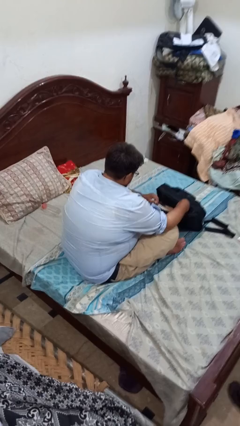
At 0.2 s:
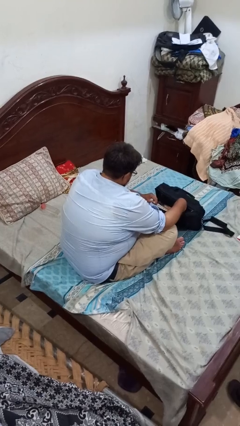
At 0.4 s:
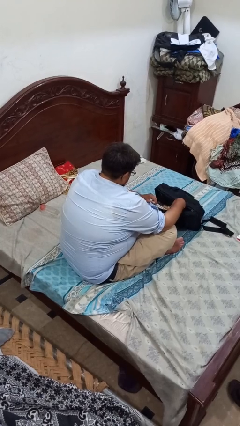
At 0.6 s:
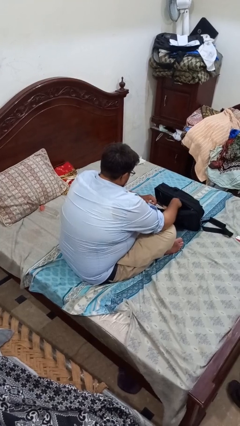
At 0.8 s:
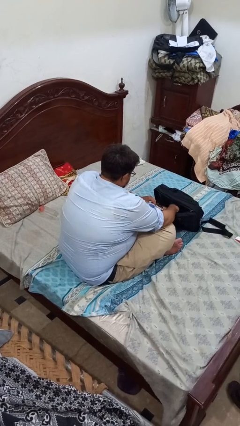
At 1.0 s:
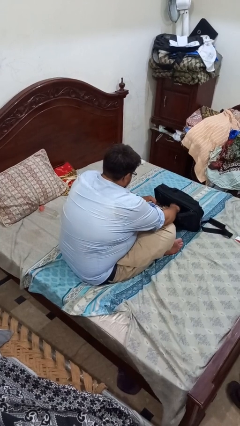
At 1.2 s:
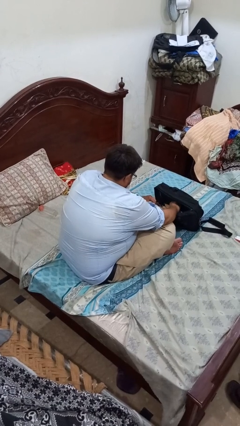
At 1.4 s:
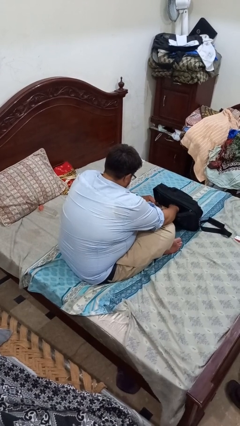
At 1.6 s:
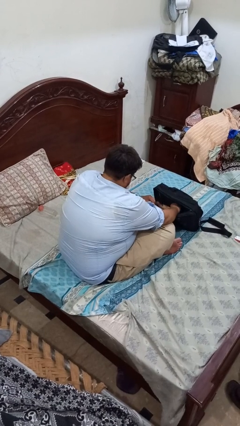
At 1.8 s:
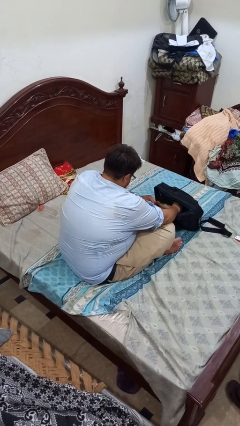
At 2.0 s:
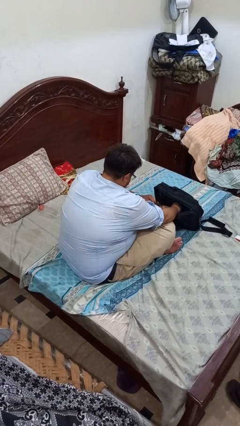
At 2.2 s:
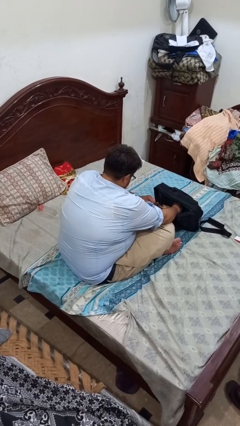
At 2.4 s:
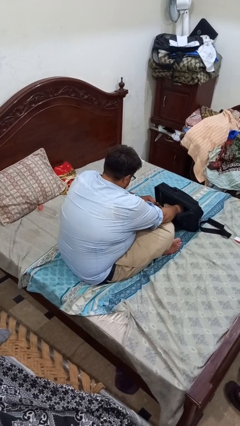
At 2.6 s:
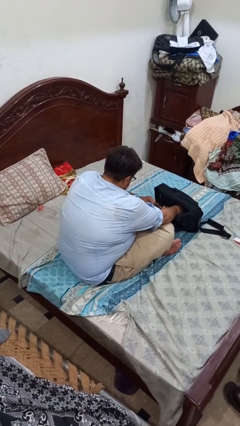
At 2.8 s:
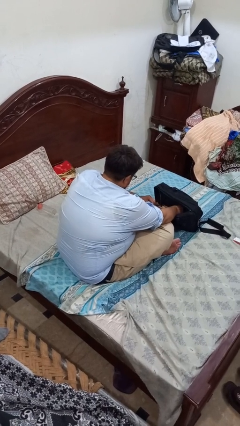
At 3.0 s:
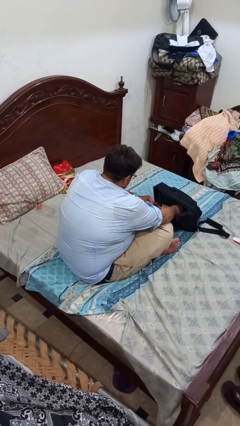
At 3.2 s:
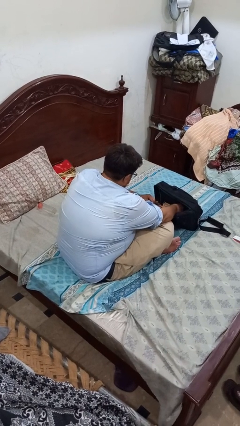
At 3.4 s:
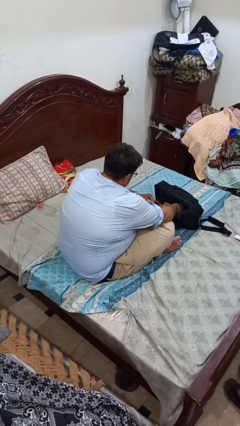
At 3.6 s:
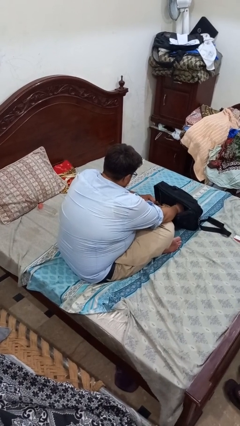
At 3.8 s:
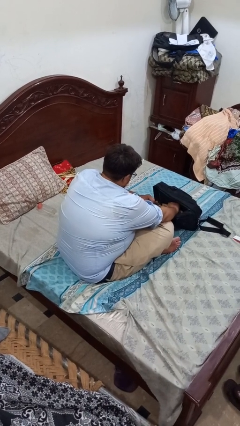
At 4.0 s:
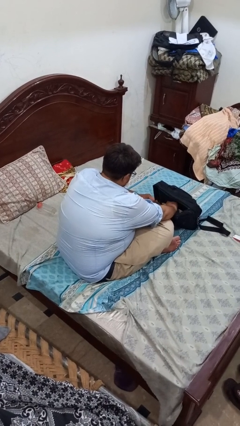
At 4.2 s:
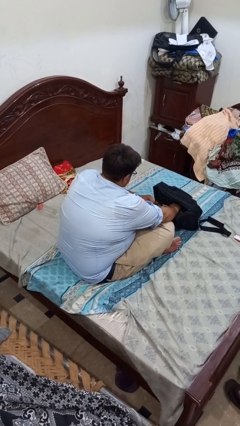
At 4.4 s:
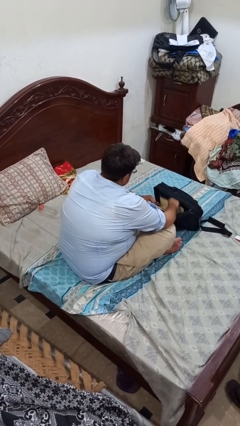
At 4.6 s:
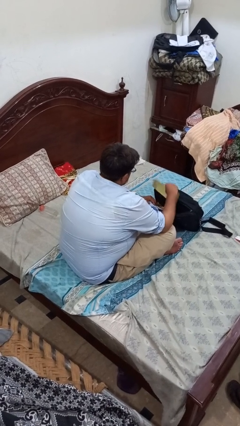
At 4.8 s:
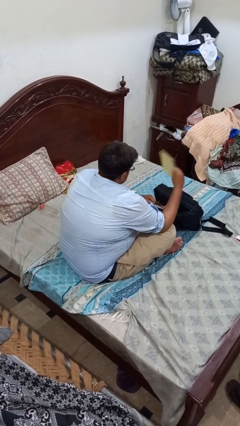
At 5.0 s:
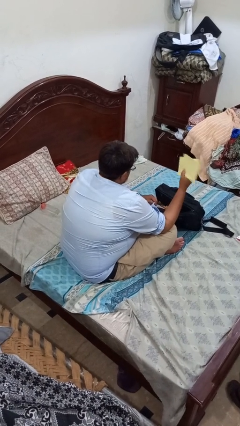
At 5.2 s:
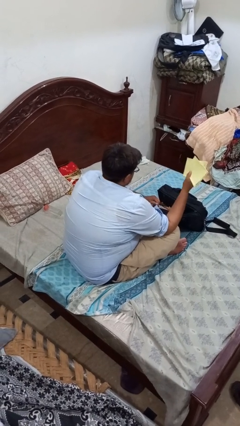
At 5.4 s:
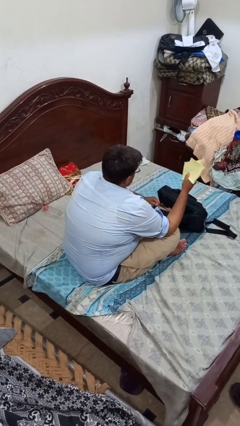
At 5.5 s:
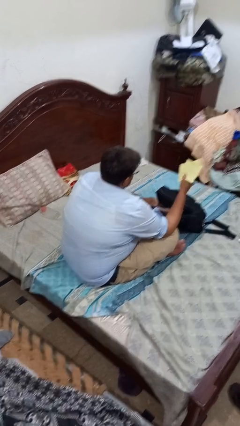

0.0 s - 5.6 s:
person searches in bag

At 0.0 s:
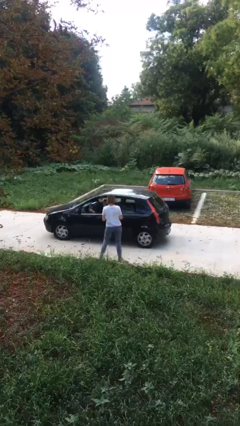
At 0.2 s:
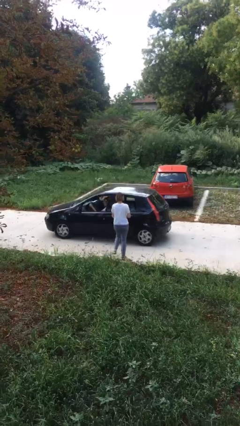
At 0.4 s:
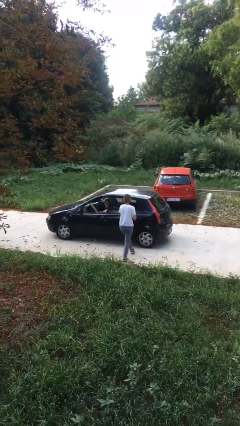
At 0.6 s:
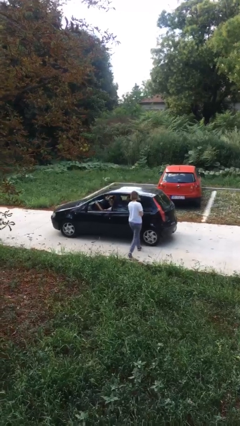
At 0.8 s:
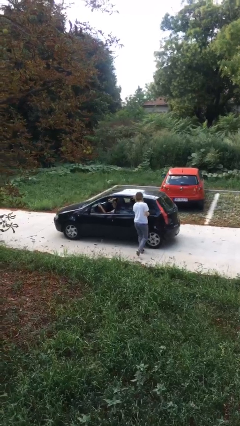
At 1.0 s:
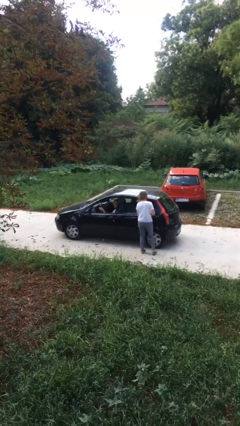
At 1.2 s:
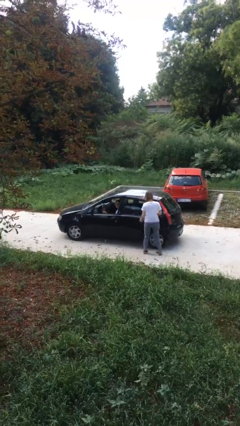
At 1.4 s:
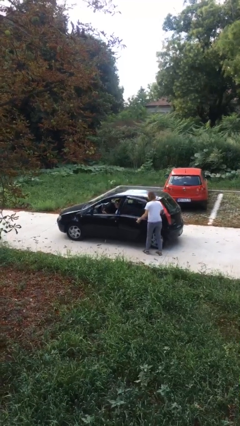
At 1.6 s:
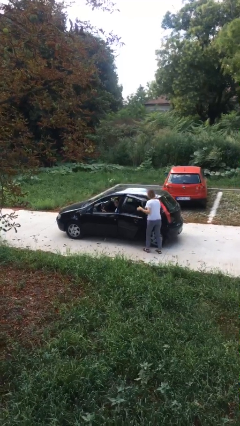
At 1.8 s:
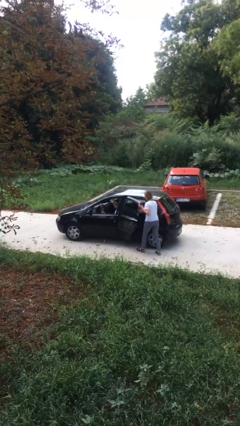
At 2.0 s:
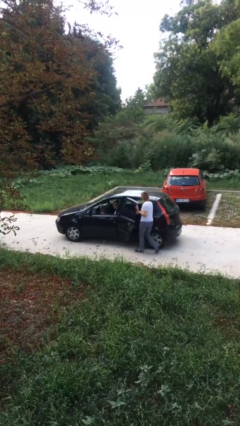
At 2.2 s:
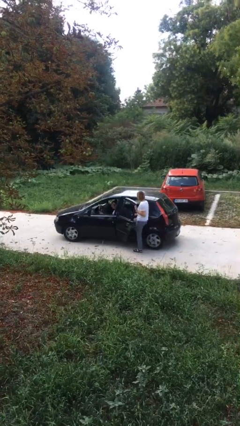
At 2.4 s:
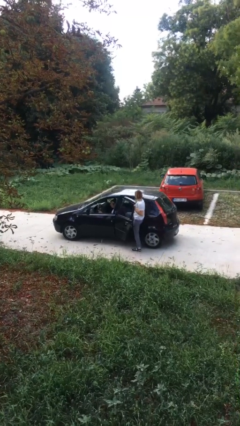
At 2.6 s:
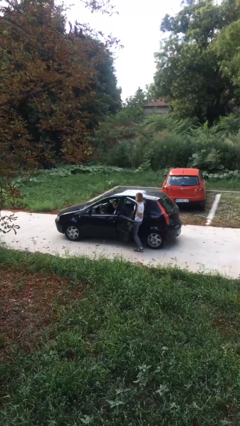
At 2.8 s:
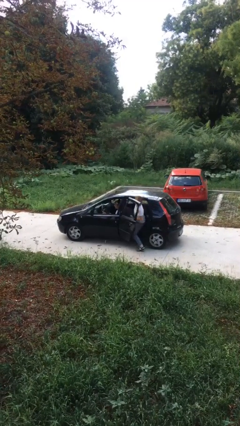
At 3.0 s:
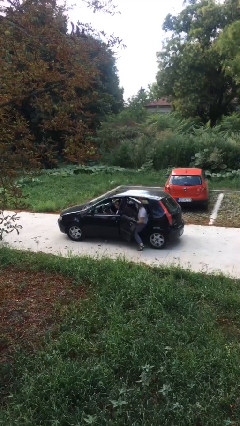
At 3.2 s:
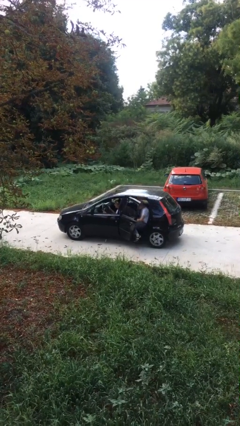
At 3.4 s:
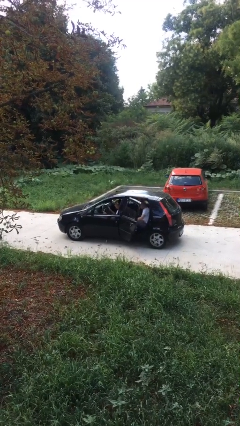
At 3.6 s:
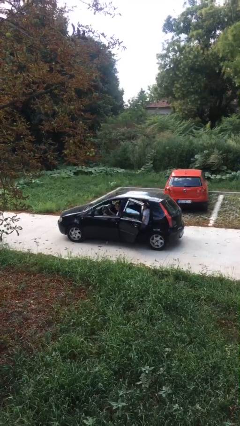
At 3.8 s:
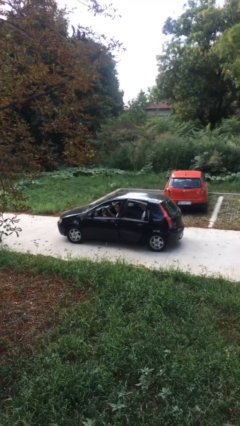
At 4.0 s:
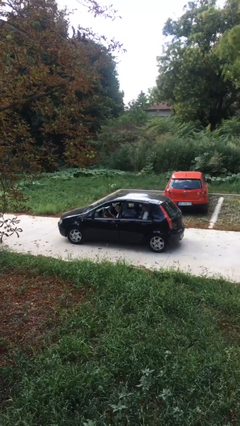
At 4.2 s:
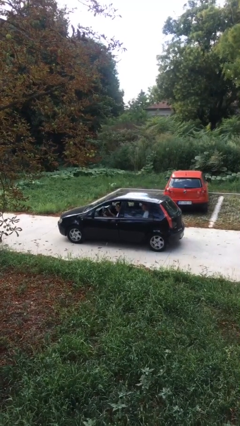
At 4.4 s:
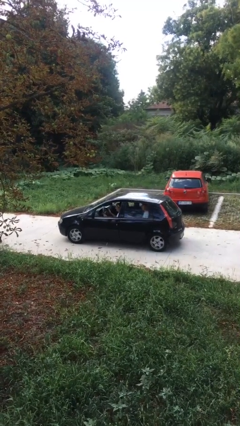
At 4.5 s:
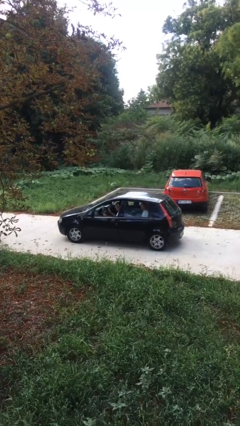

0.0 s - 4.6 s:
car picks up person

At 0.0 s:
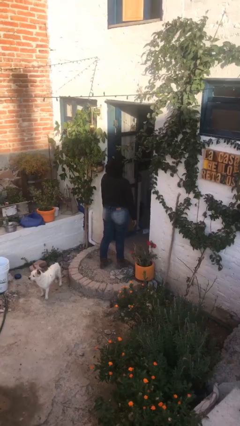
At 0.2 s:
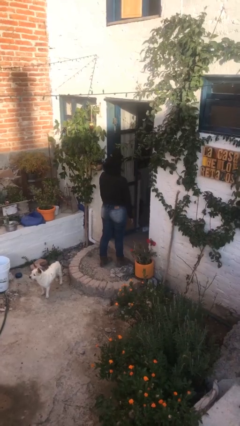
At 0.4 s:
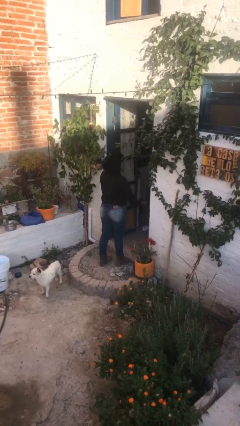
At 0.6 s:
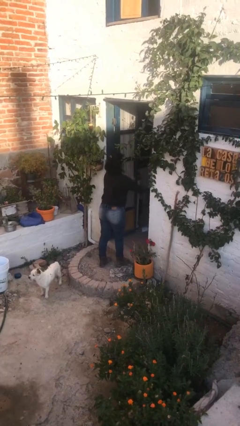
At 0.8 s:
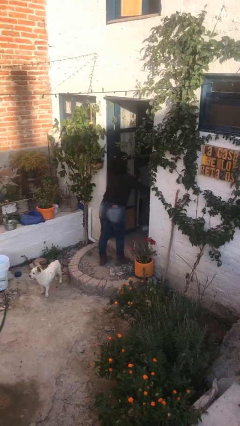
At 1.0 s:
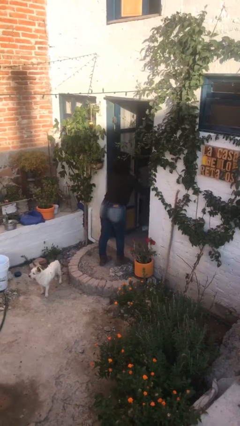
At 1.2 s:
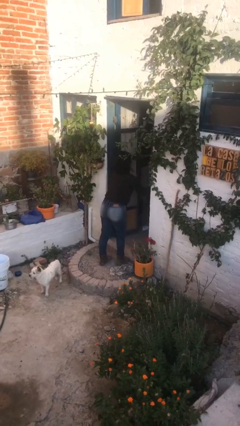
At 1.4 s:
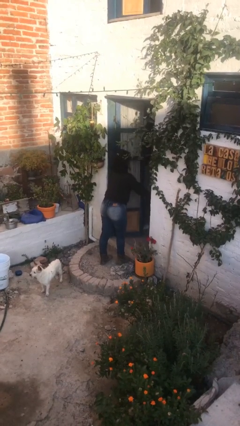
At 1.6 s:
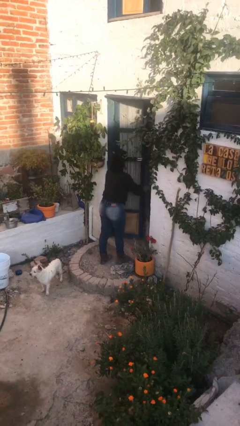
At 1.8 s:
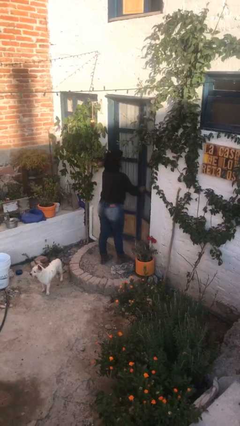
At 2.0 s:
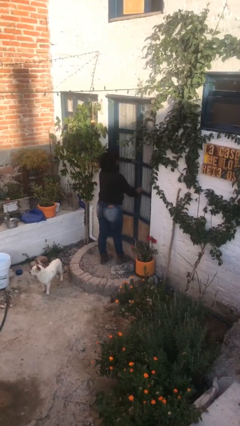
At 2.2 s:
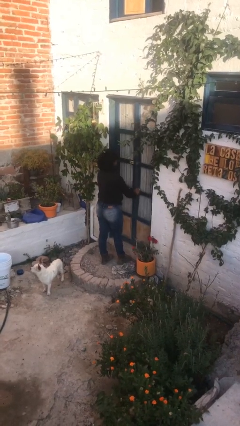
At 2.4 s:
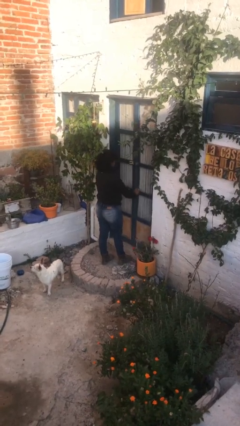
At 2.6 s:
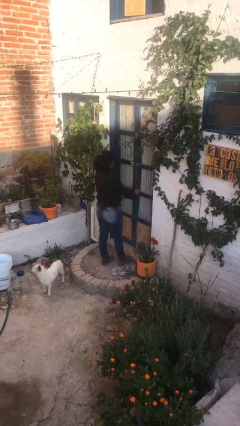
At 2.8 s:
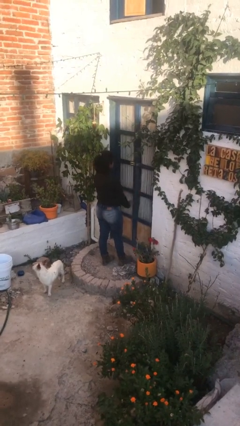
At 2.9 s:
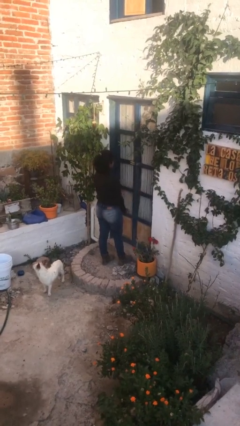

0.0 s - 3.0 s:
person closes facility door

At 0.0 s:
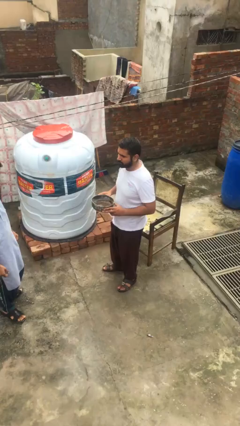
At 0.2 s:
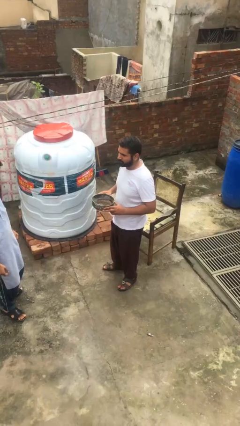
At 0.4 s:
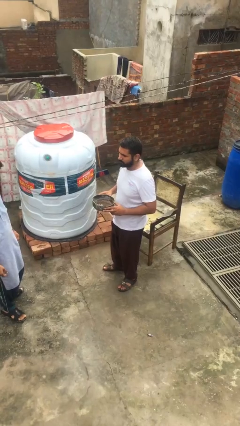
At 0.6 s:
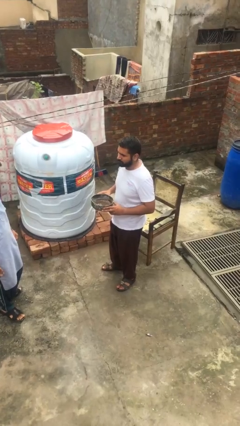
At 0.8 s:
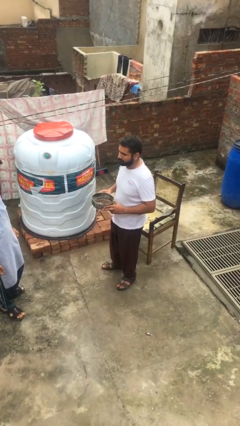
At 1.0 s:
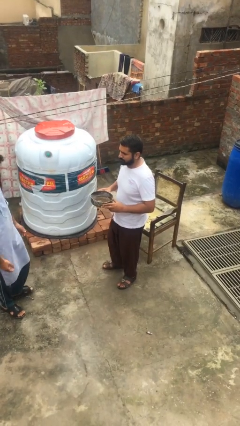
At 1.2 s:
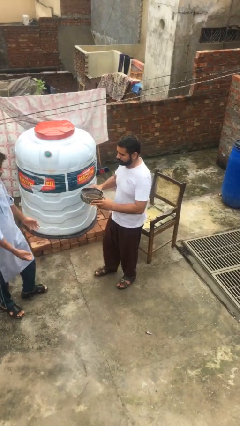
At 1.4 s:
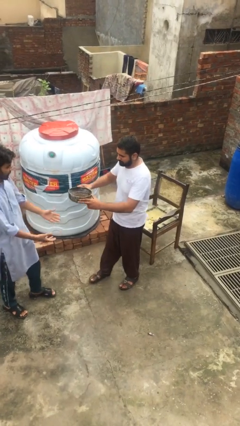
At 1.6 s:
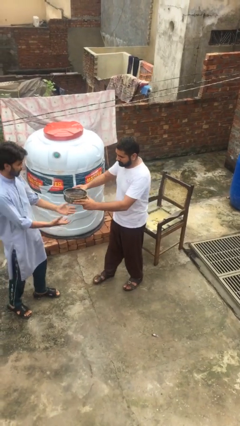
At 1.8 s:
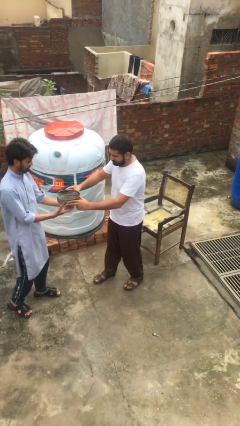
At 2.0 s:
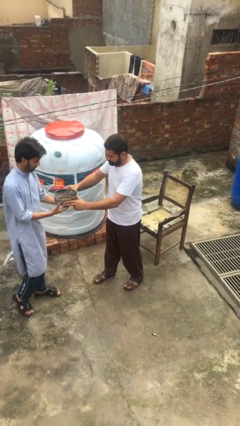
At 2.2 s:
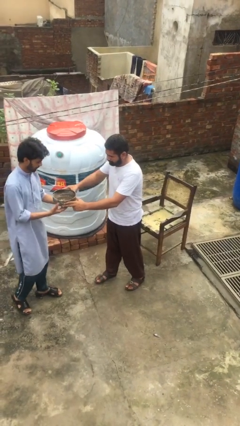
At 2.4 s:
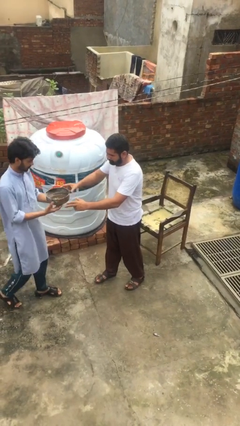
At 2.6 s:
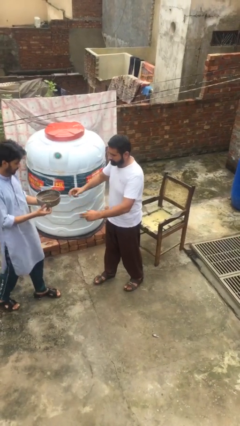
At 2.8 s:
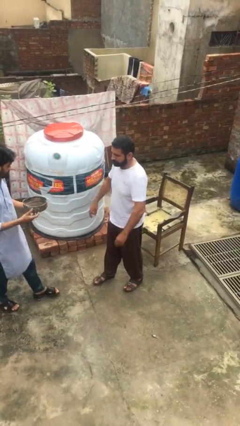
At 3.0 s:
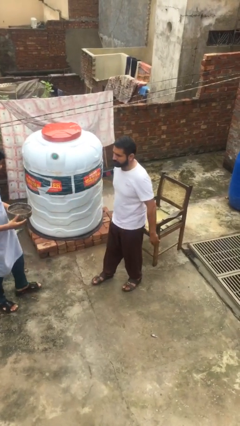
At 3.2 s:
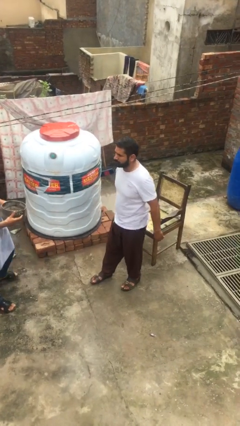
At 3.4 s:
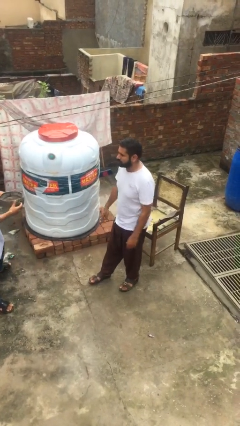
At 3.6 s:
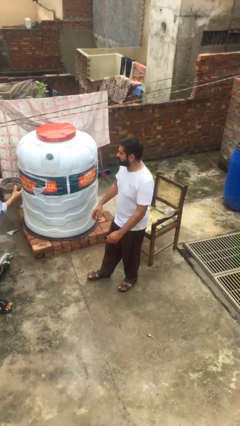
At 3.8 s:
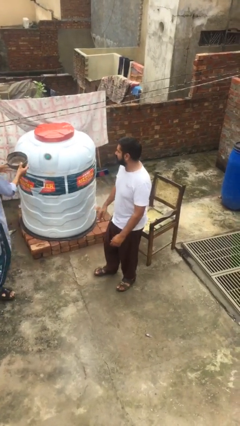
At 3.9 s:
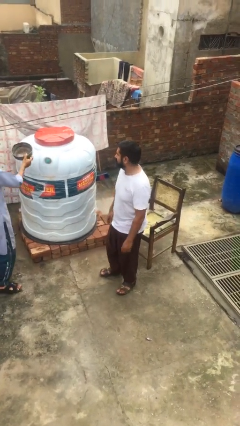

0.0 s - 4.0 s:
person transfers object to person

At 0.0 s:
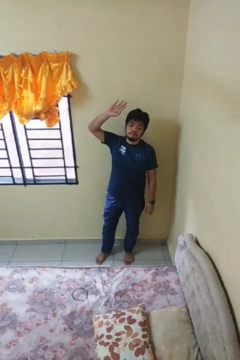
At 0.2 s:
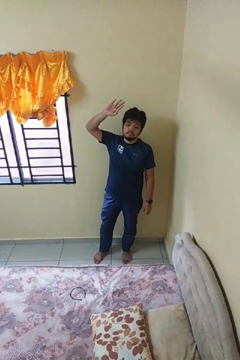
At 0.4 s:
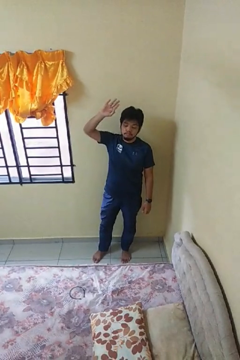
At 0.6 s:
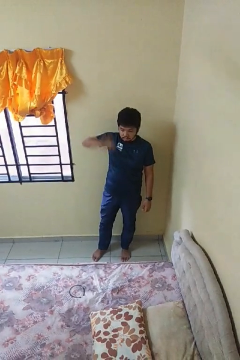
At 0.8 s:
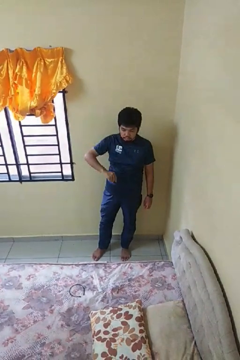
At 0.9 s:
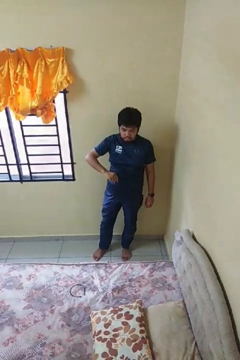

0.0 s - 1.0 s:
person gestures swipe down
